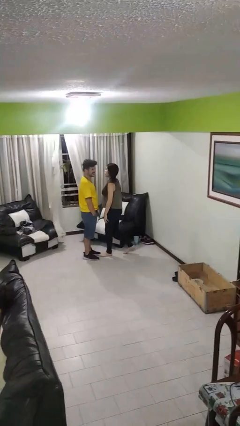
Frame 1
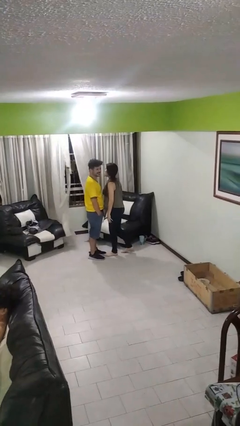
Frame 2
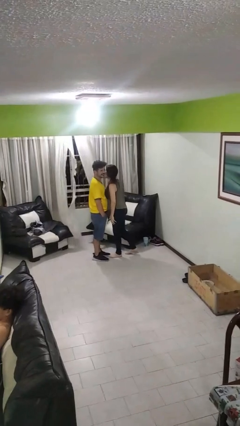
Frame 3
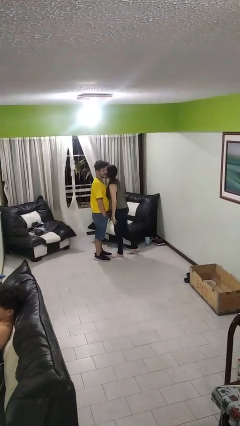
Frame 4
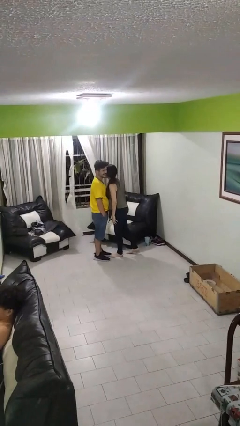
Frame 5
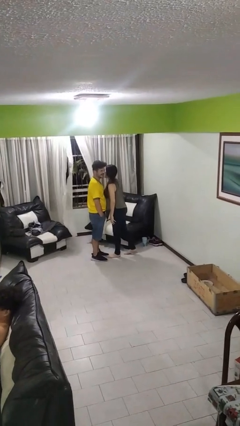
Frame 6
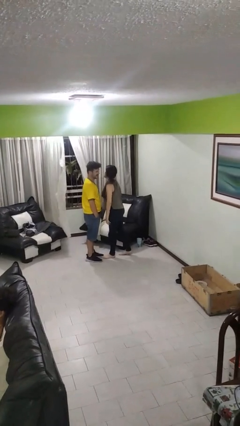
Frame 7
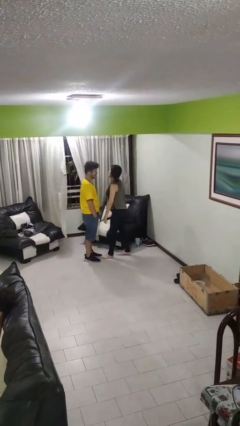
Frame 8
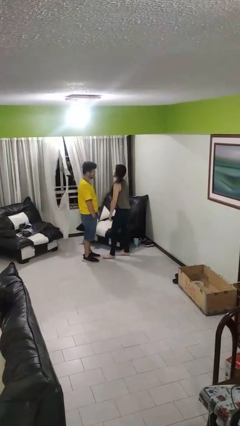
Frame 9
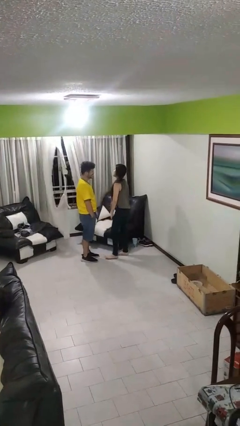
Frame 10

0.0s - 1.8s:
person kisses cheek of person

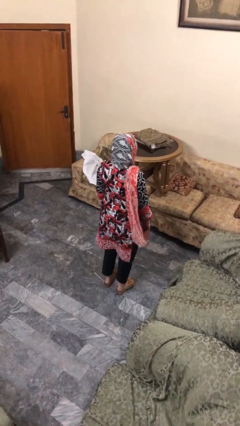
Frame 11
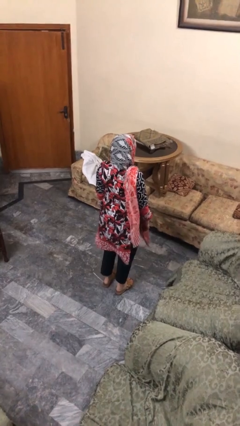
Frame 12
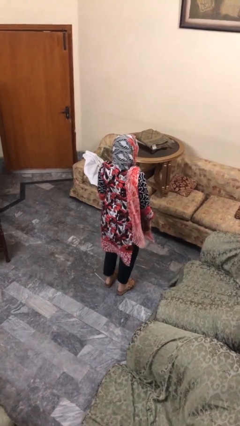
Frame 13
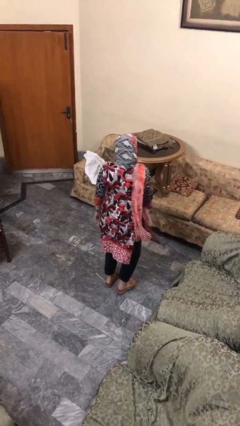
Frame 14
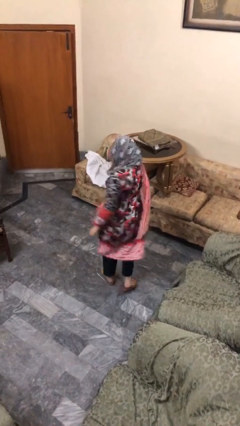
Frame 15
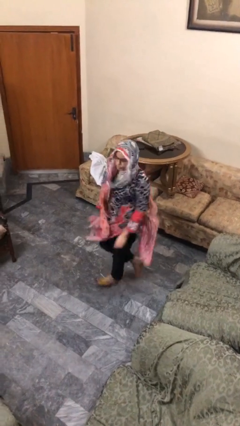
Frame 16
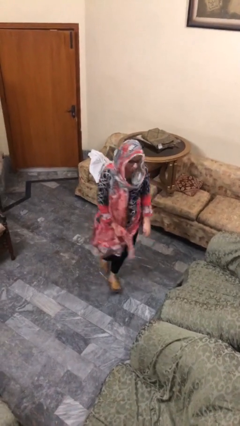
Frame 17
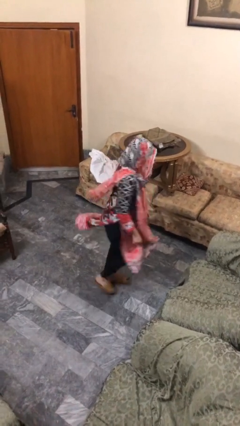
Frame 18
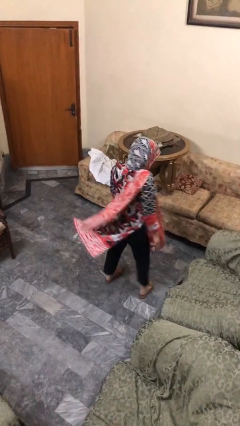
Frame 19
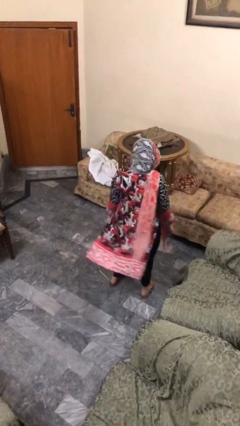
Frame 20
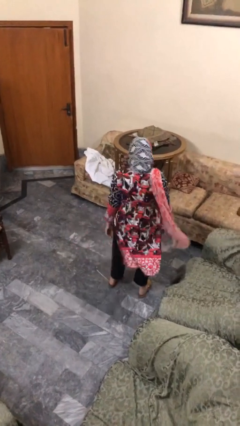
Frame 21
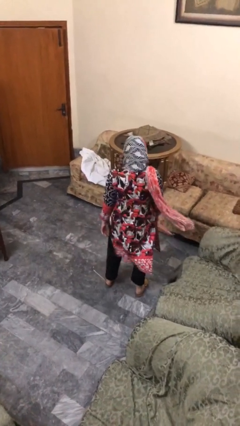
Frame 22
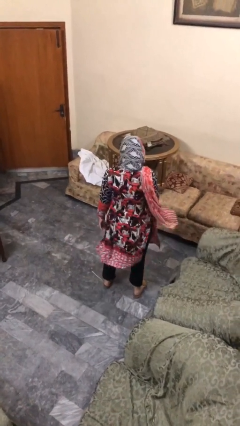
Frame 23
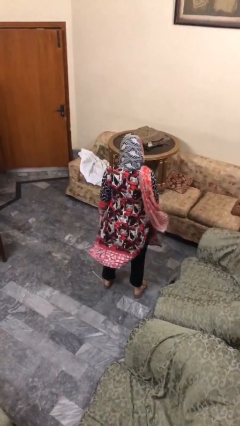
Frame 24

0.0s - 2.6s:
person twirls

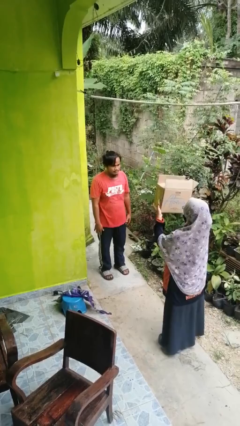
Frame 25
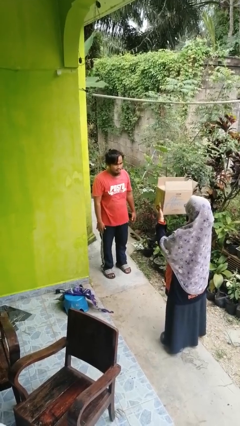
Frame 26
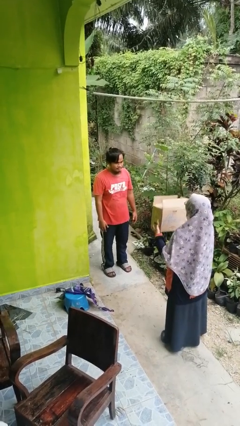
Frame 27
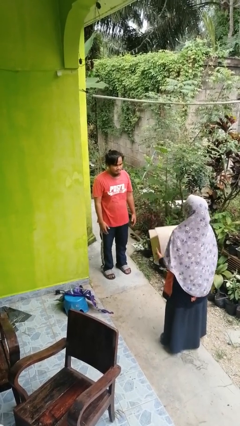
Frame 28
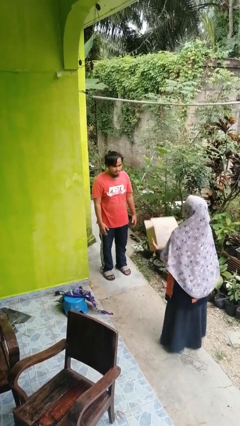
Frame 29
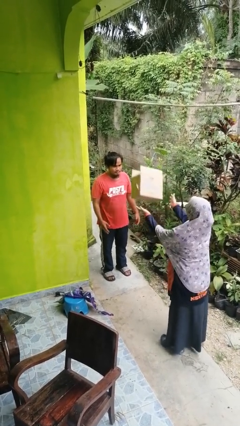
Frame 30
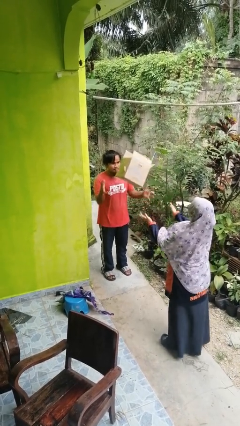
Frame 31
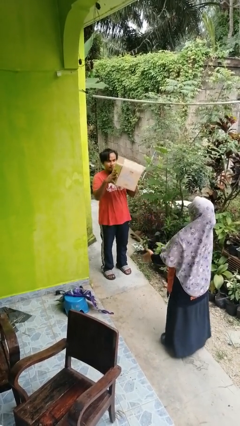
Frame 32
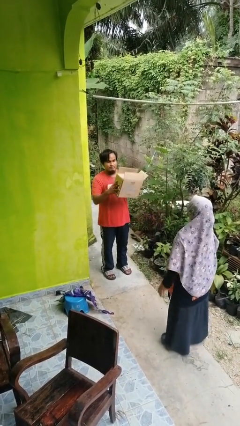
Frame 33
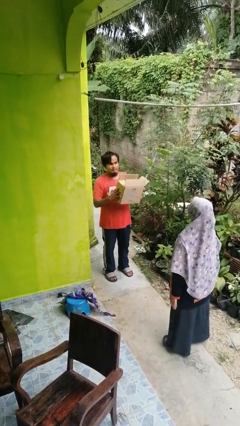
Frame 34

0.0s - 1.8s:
person catches object from person

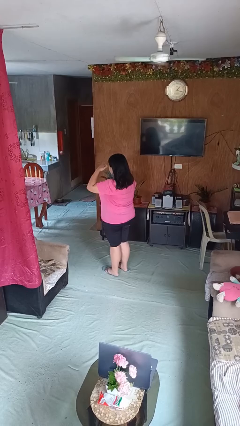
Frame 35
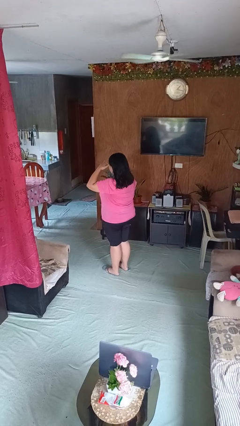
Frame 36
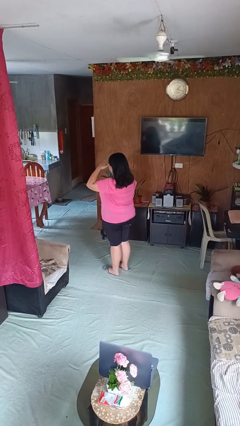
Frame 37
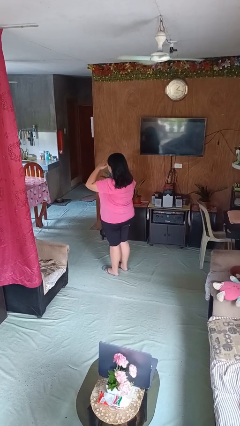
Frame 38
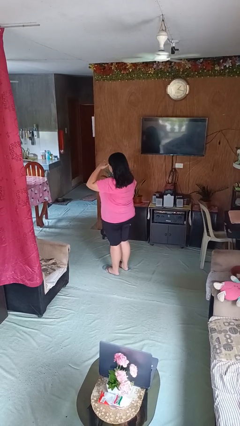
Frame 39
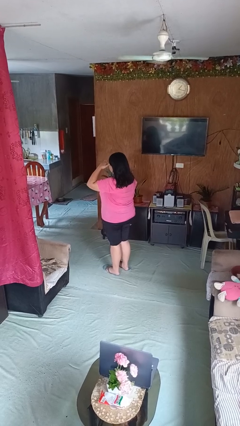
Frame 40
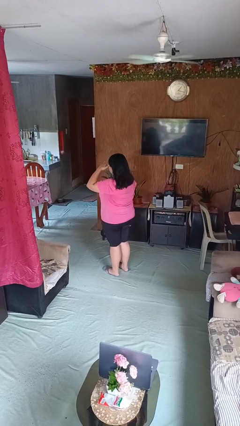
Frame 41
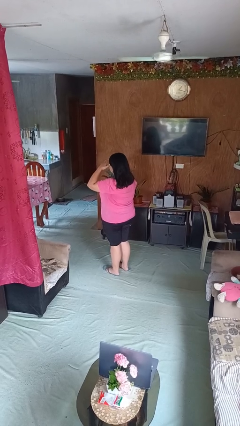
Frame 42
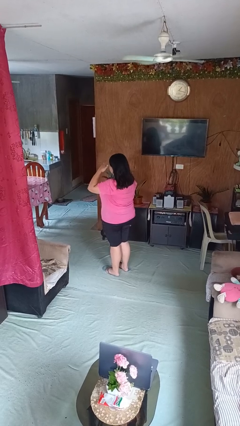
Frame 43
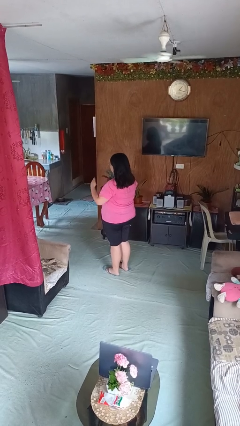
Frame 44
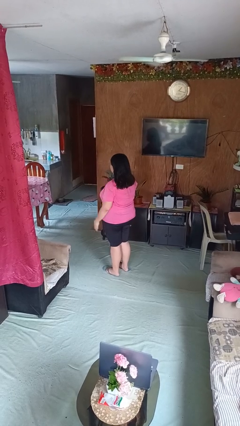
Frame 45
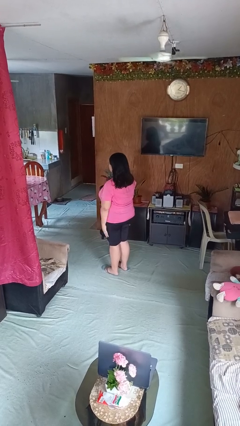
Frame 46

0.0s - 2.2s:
person salutes

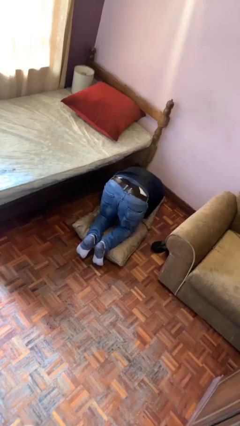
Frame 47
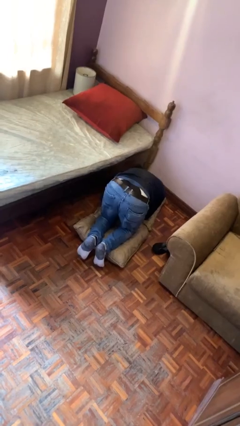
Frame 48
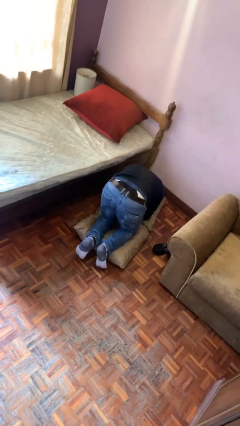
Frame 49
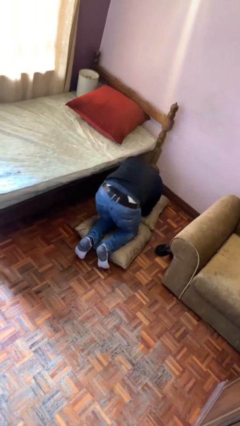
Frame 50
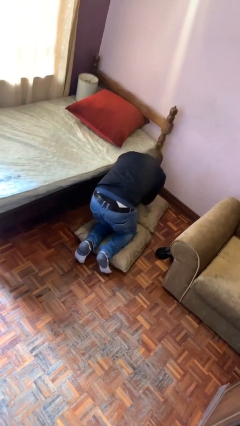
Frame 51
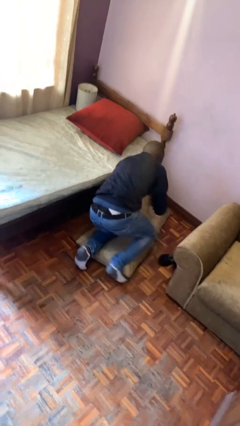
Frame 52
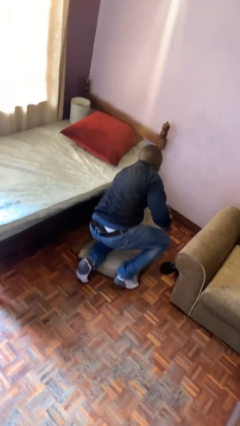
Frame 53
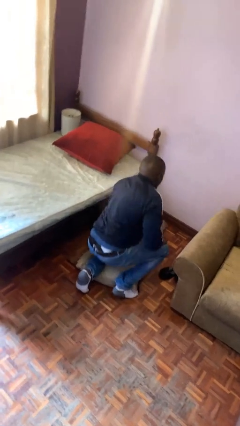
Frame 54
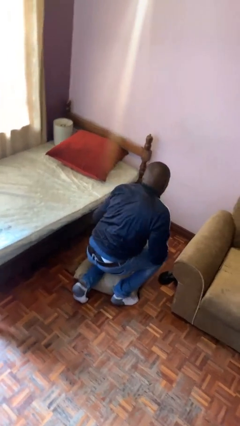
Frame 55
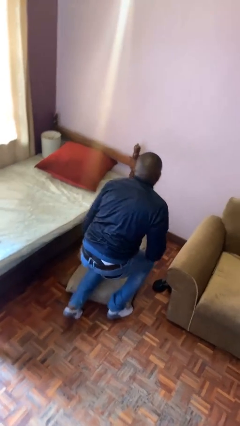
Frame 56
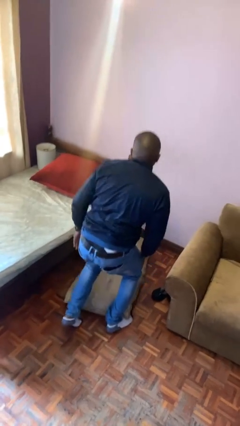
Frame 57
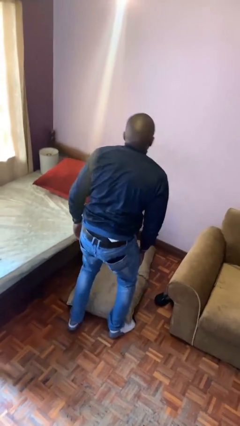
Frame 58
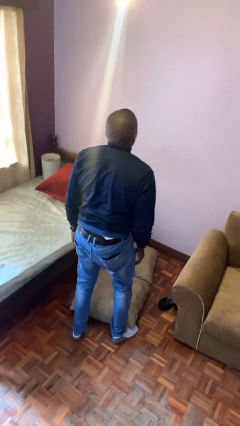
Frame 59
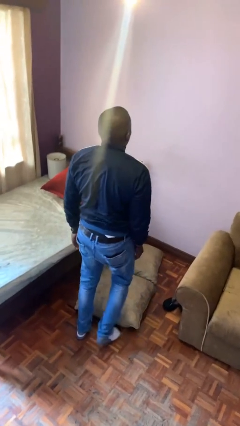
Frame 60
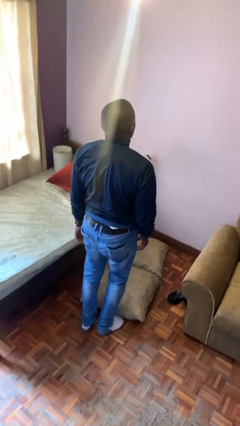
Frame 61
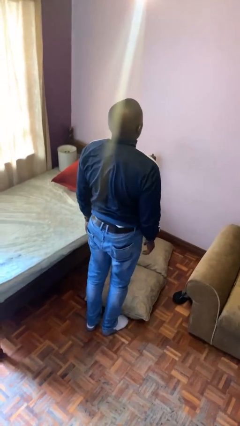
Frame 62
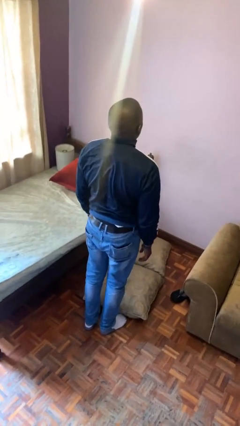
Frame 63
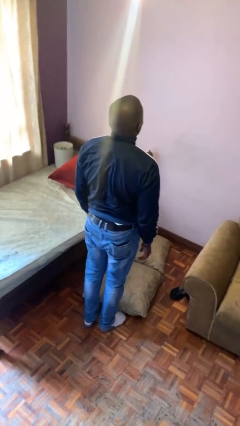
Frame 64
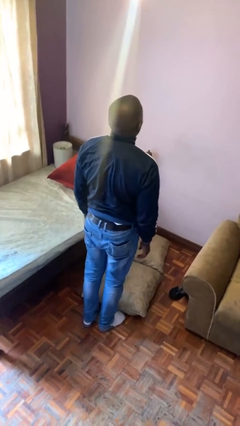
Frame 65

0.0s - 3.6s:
person stands up from floor

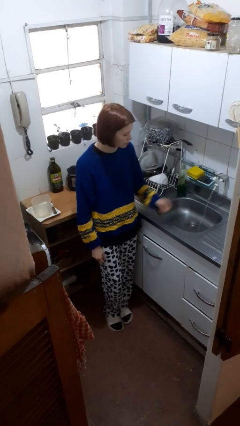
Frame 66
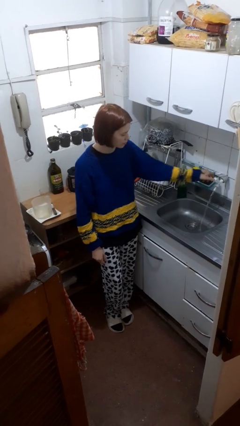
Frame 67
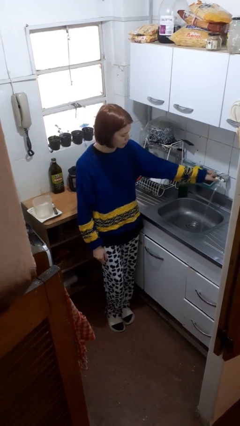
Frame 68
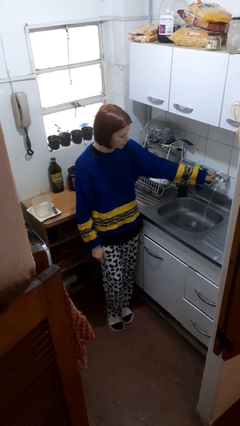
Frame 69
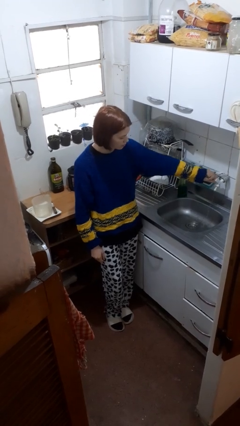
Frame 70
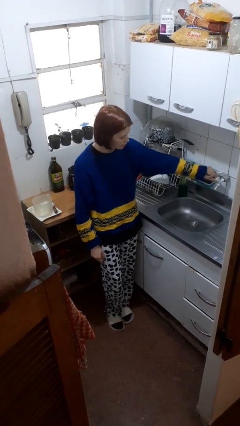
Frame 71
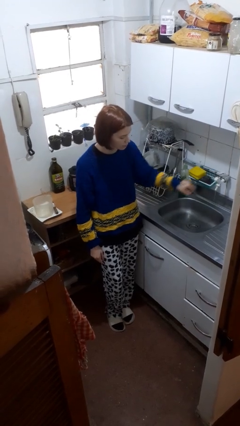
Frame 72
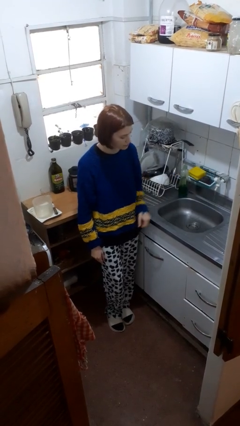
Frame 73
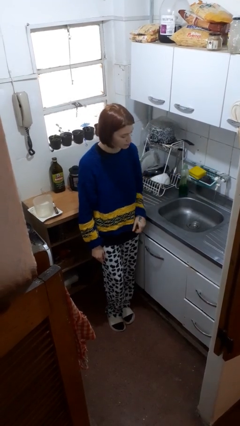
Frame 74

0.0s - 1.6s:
person turns off faucet

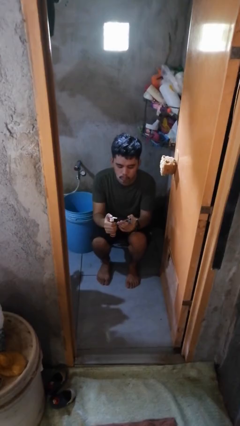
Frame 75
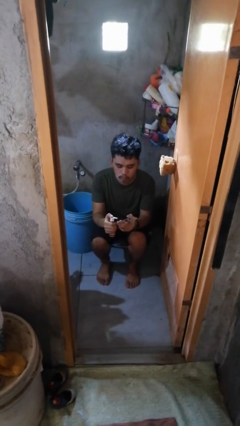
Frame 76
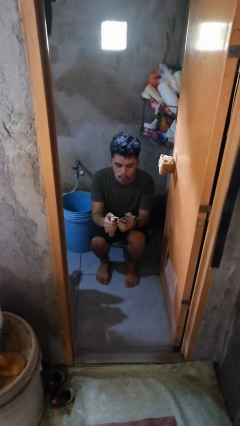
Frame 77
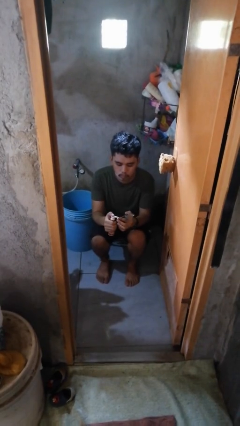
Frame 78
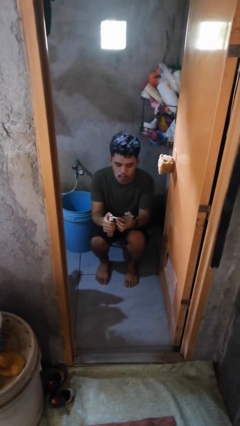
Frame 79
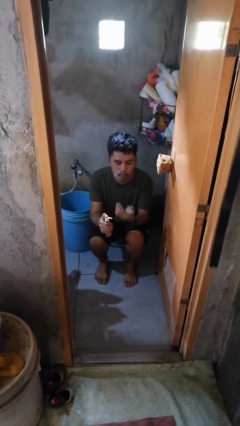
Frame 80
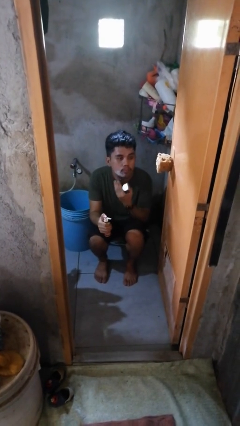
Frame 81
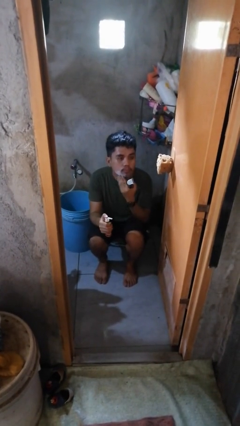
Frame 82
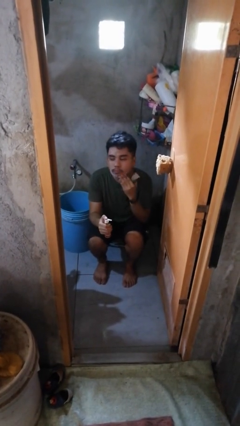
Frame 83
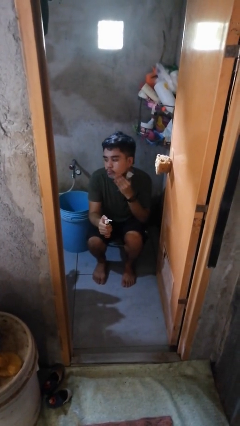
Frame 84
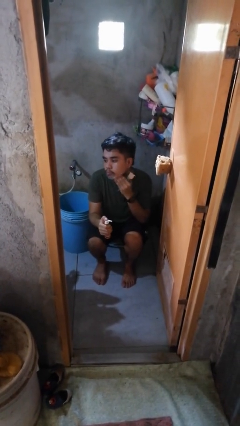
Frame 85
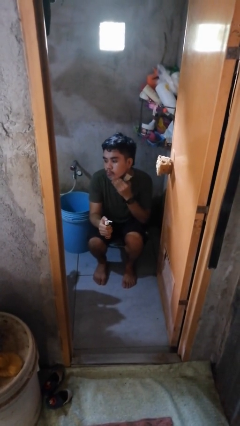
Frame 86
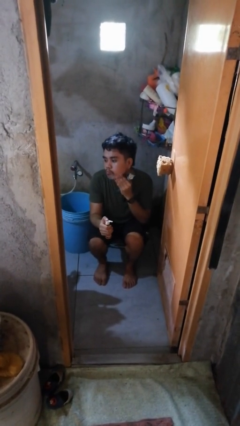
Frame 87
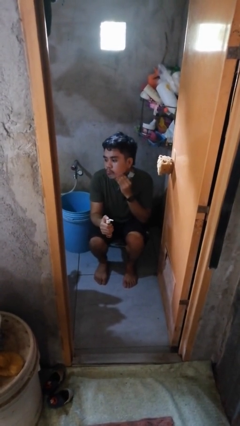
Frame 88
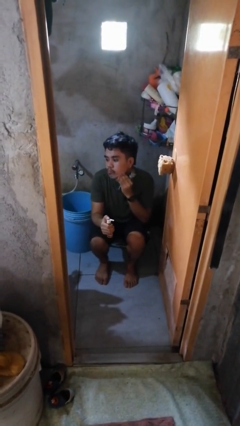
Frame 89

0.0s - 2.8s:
person applies shaving cream

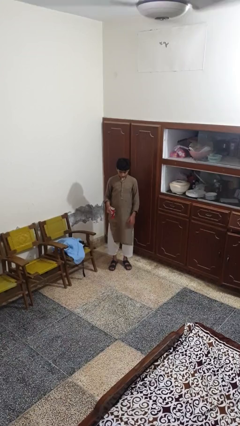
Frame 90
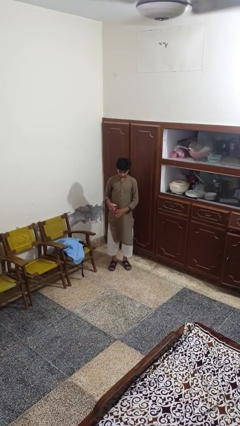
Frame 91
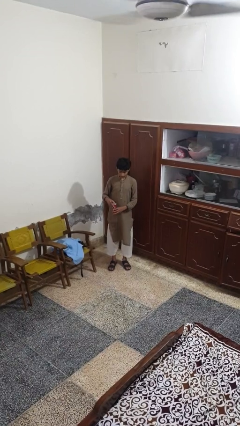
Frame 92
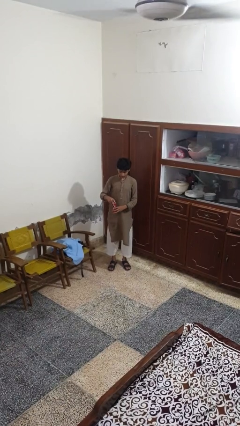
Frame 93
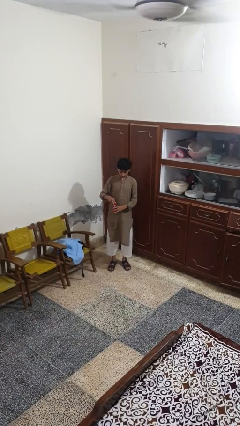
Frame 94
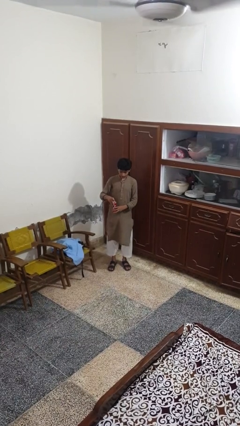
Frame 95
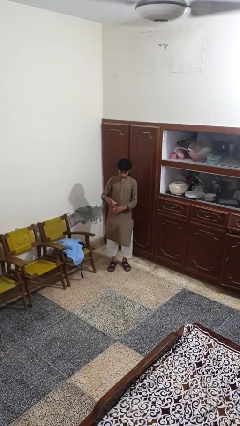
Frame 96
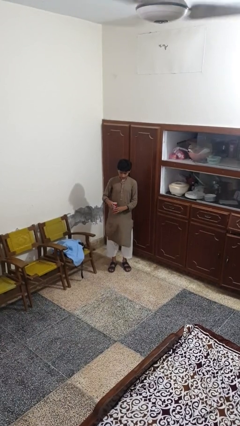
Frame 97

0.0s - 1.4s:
person opens beverage can
